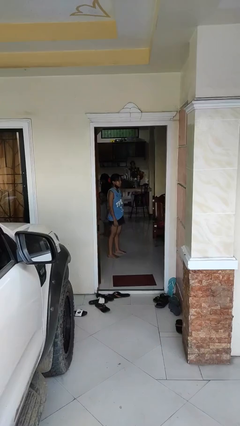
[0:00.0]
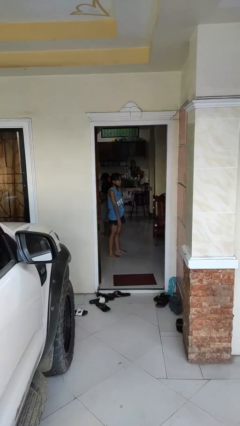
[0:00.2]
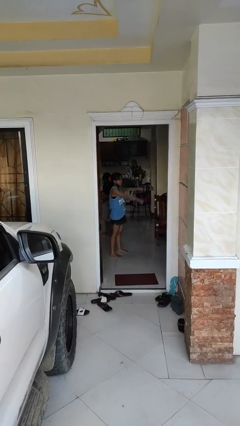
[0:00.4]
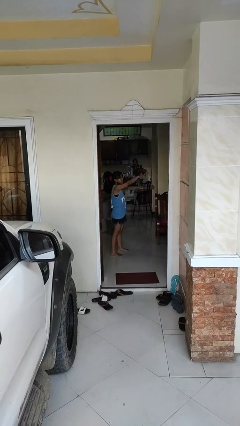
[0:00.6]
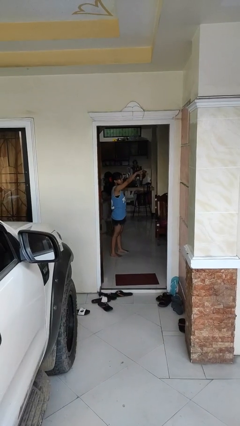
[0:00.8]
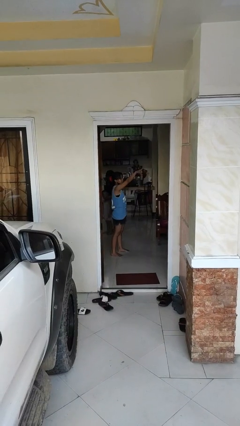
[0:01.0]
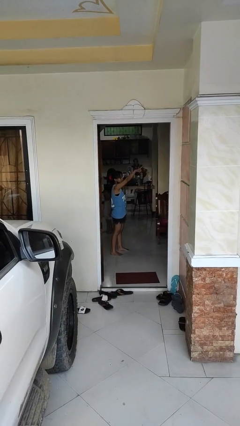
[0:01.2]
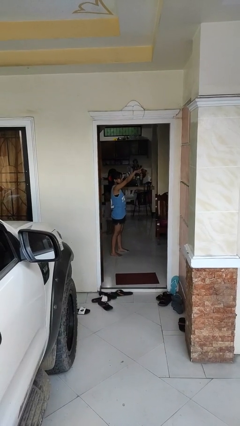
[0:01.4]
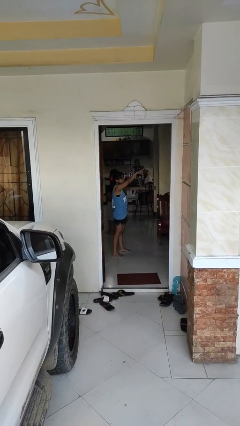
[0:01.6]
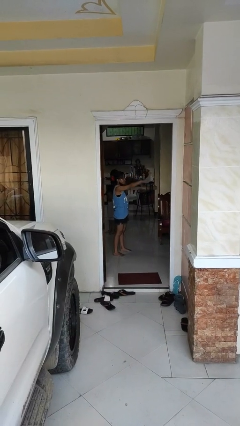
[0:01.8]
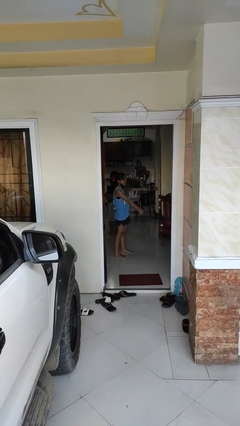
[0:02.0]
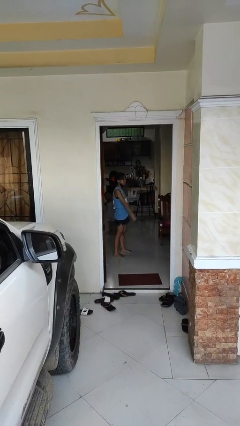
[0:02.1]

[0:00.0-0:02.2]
person points at person

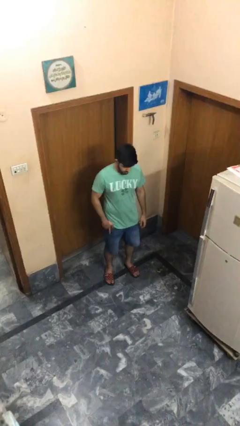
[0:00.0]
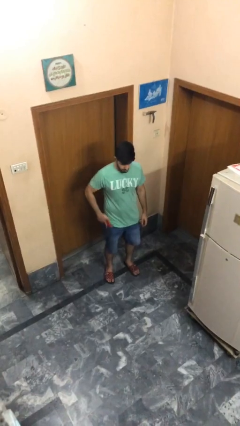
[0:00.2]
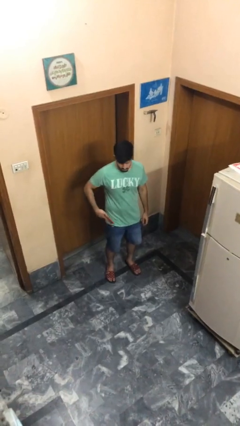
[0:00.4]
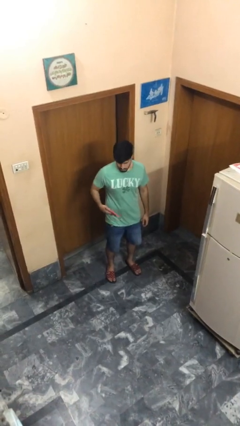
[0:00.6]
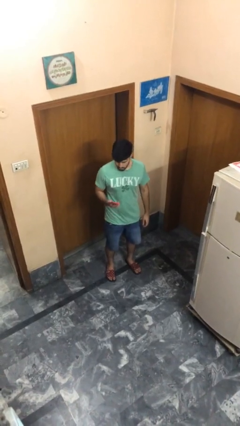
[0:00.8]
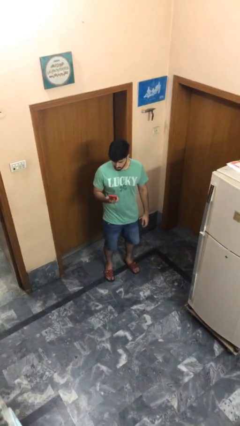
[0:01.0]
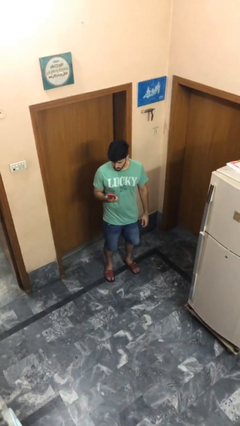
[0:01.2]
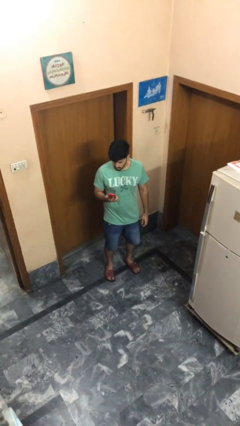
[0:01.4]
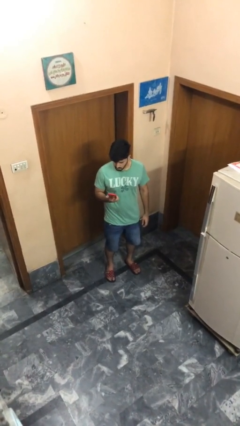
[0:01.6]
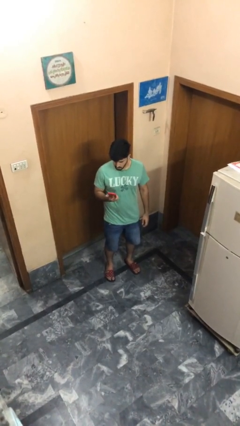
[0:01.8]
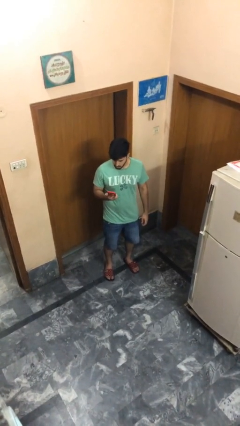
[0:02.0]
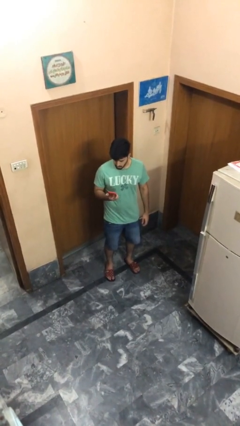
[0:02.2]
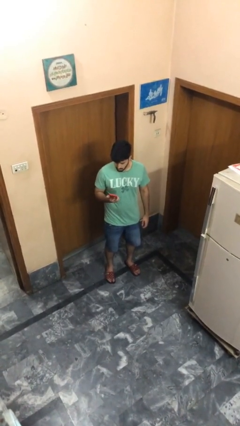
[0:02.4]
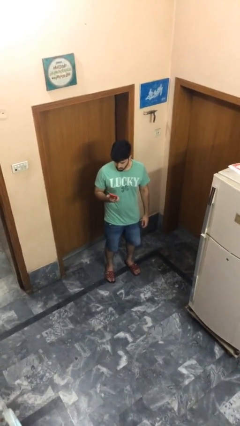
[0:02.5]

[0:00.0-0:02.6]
person takes phone from pocket

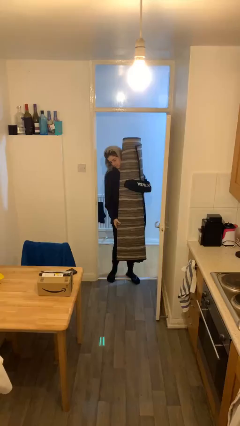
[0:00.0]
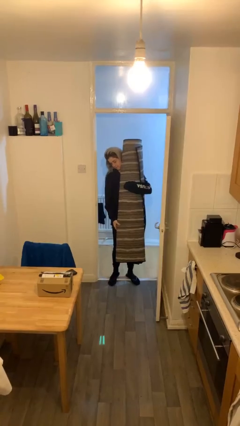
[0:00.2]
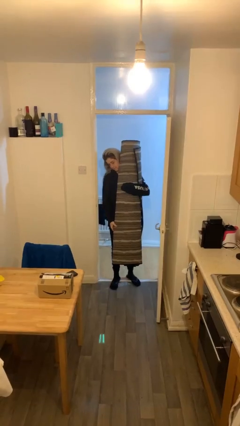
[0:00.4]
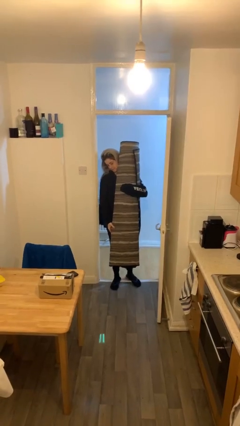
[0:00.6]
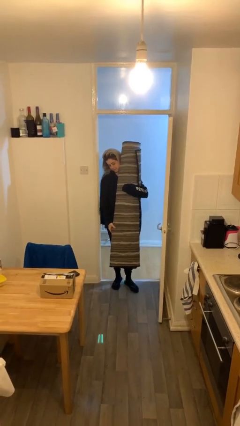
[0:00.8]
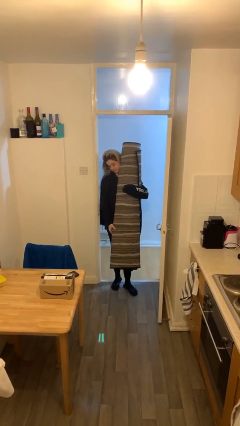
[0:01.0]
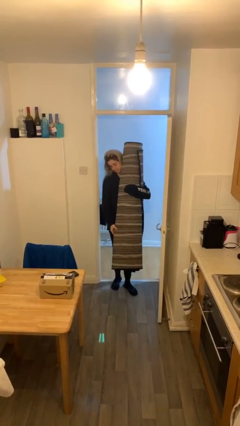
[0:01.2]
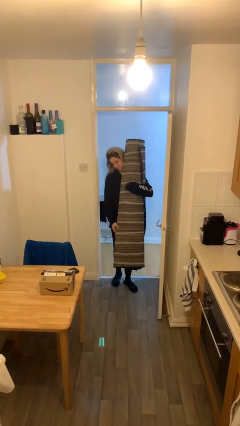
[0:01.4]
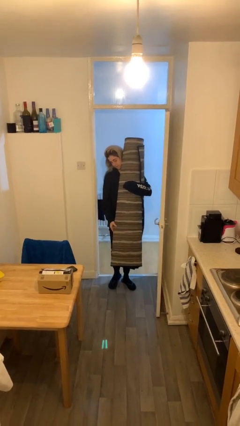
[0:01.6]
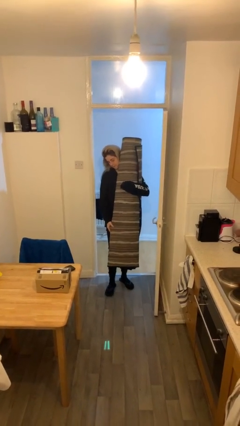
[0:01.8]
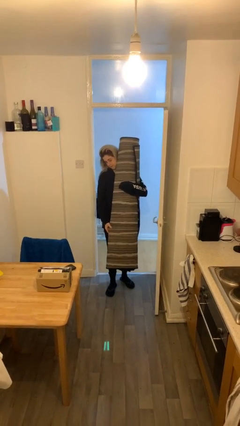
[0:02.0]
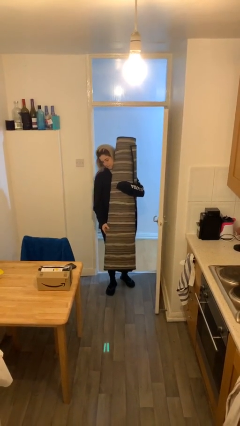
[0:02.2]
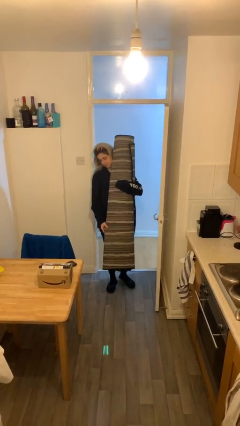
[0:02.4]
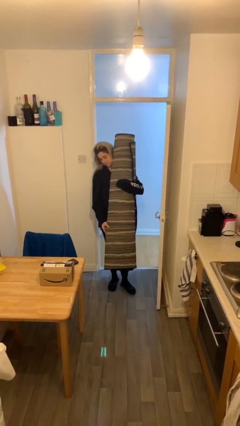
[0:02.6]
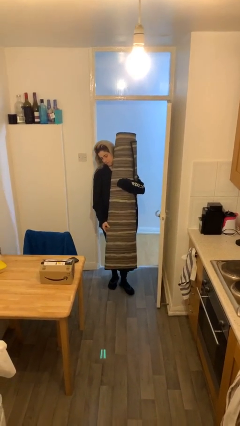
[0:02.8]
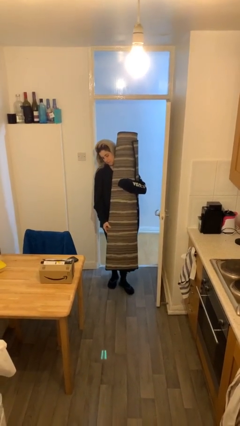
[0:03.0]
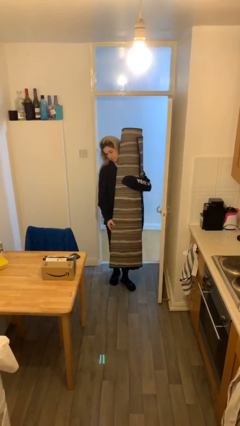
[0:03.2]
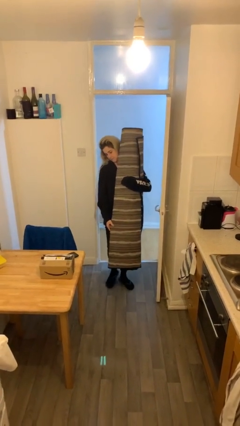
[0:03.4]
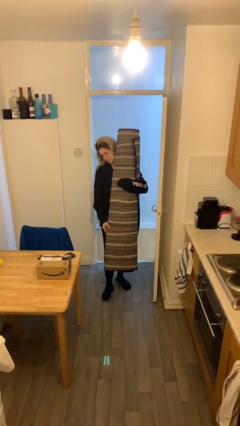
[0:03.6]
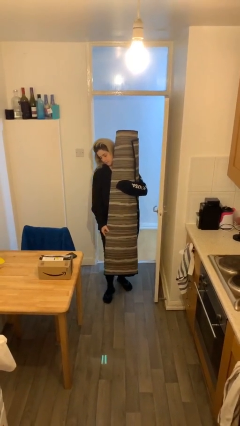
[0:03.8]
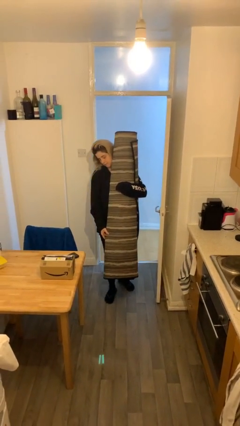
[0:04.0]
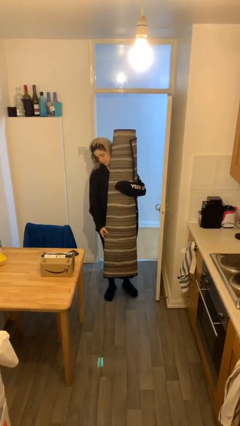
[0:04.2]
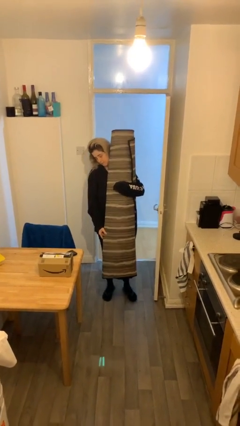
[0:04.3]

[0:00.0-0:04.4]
person carries heavy object

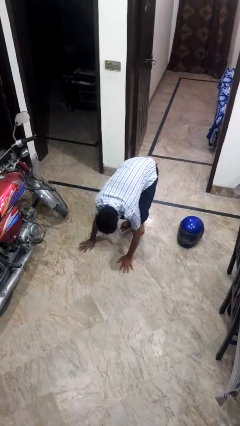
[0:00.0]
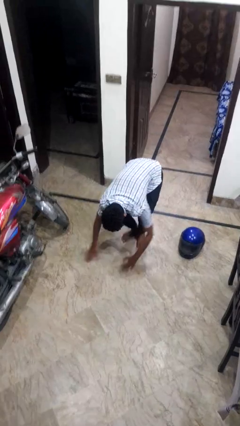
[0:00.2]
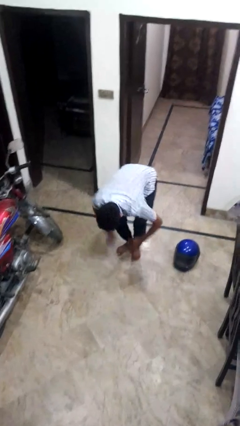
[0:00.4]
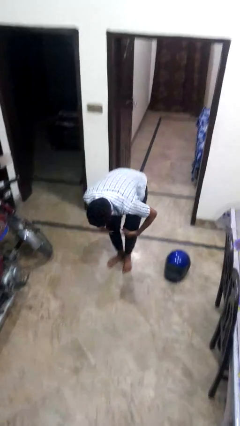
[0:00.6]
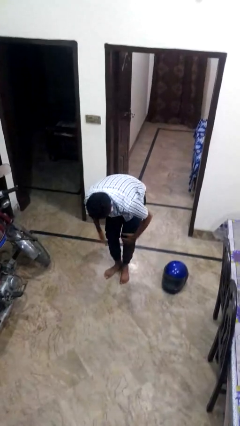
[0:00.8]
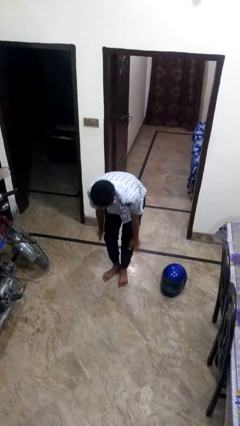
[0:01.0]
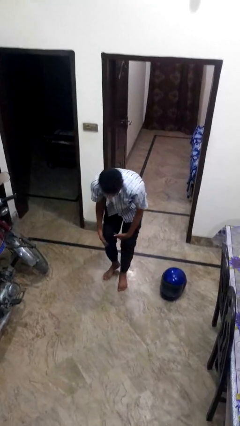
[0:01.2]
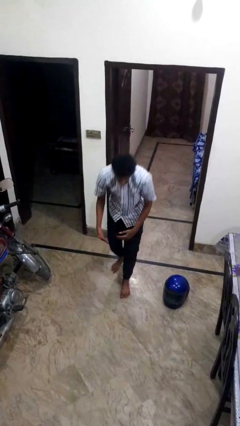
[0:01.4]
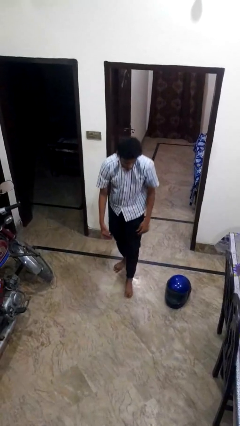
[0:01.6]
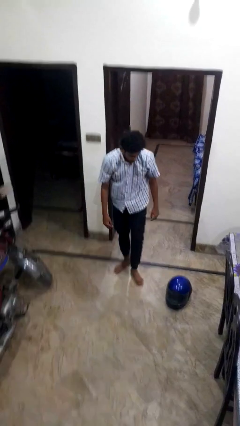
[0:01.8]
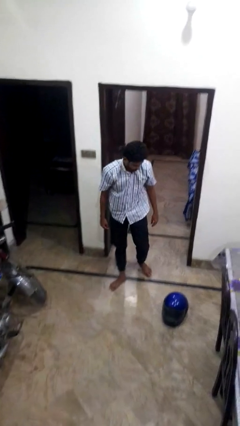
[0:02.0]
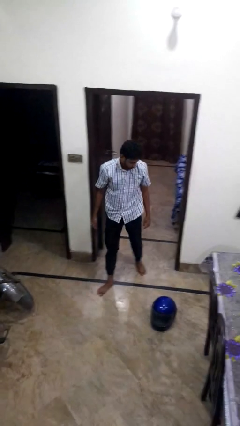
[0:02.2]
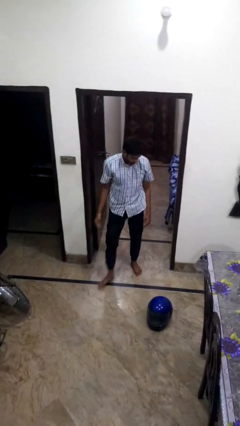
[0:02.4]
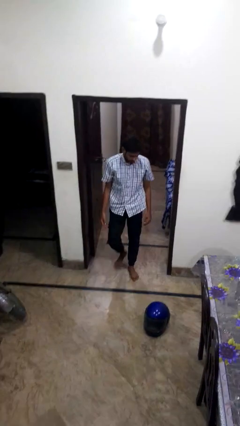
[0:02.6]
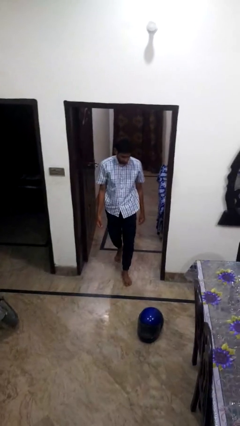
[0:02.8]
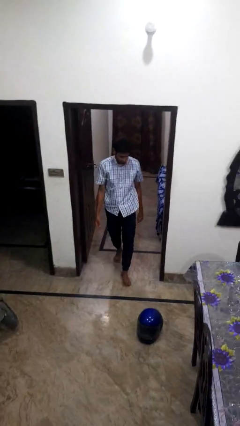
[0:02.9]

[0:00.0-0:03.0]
person stands up from floor

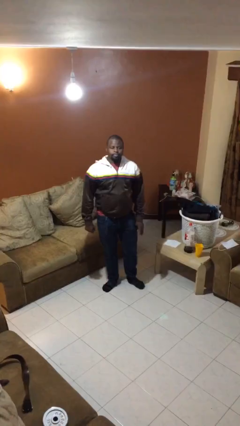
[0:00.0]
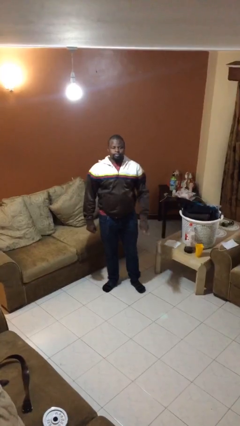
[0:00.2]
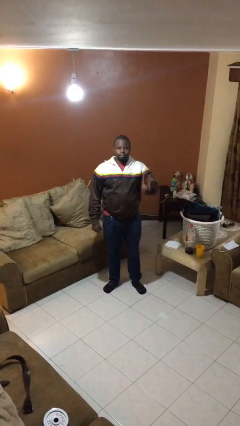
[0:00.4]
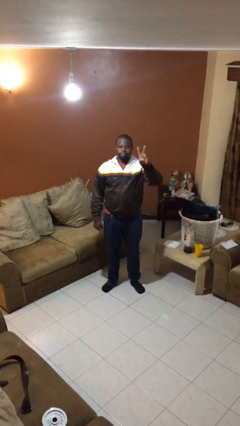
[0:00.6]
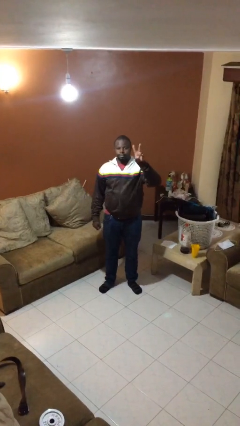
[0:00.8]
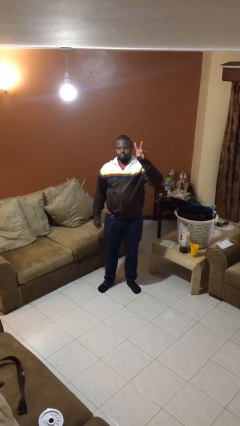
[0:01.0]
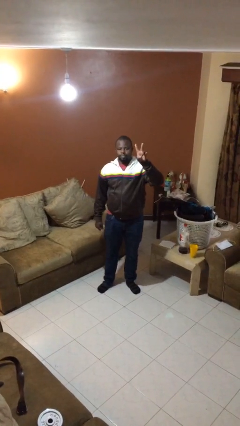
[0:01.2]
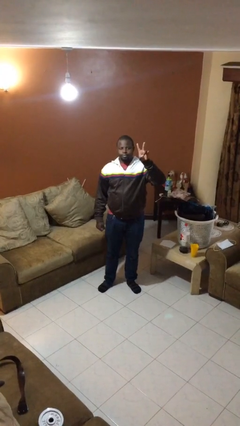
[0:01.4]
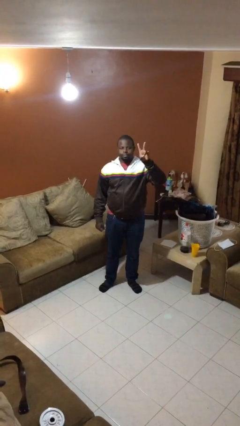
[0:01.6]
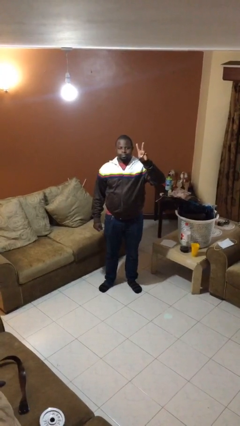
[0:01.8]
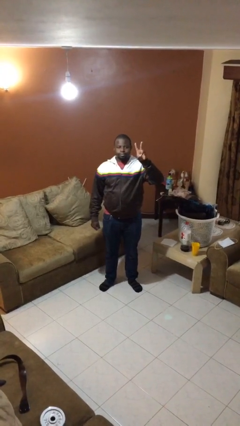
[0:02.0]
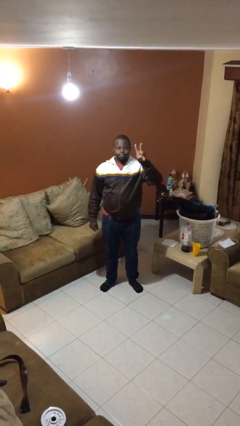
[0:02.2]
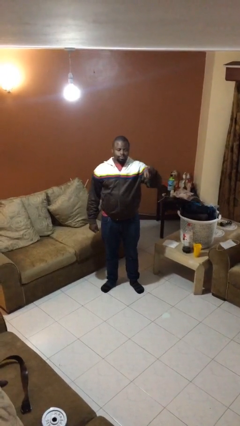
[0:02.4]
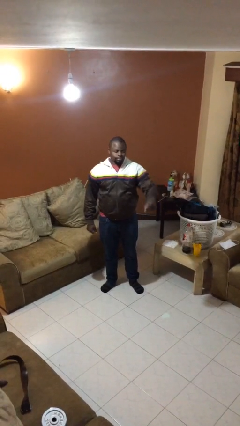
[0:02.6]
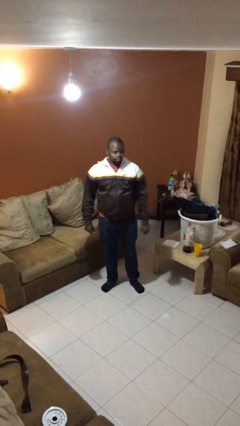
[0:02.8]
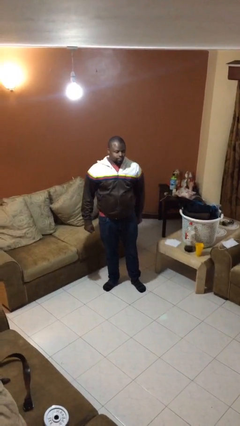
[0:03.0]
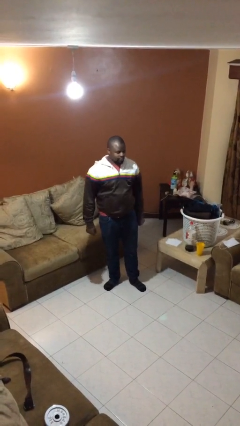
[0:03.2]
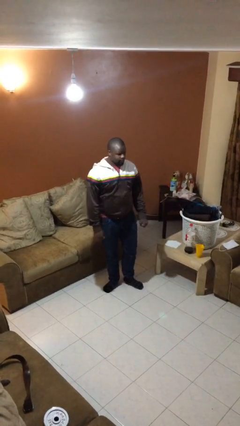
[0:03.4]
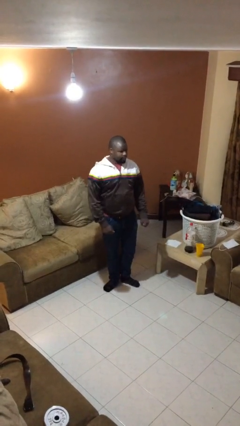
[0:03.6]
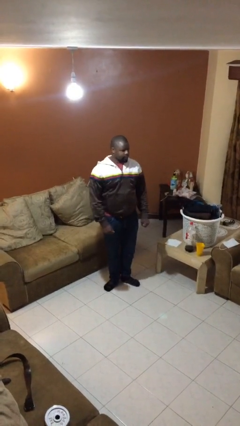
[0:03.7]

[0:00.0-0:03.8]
person gestures peace

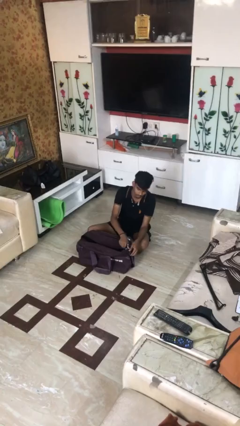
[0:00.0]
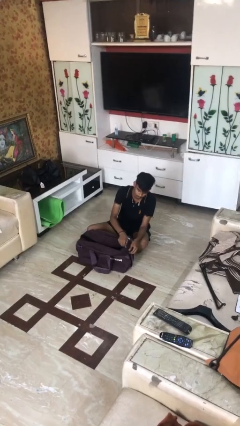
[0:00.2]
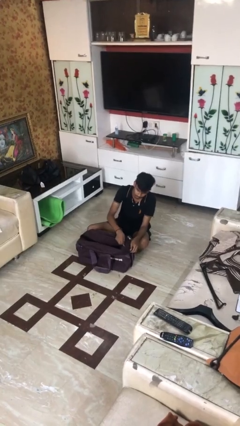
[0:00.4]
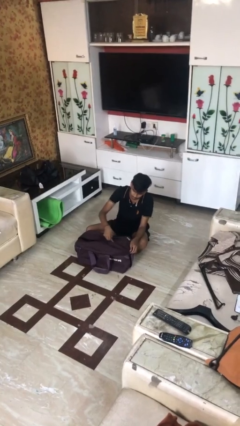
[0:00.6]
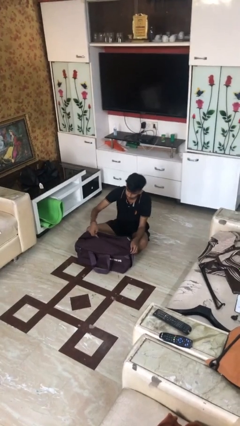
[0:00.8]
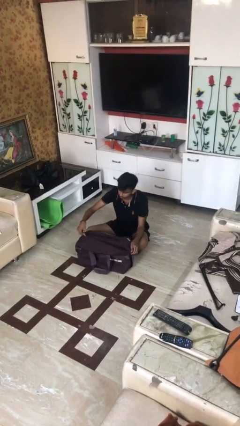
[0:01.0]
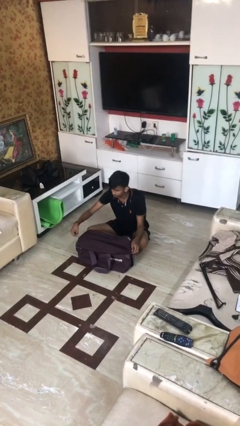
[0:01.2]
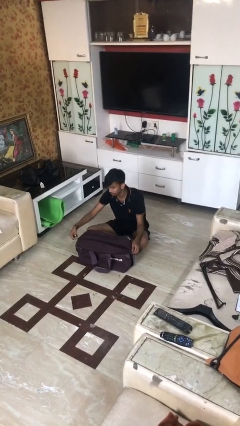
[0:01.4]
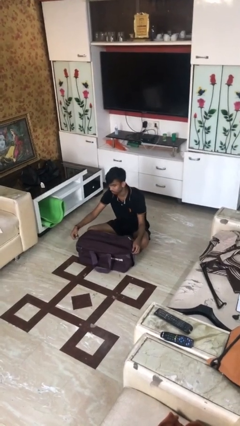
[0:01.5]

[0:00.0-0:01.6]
person closes suitcase
